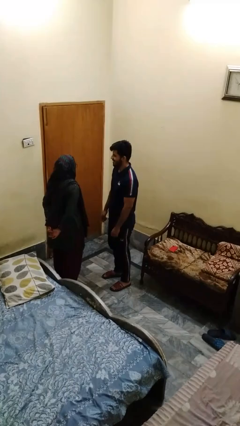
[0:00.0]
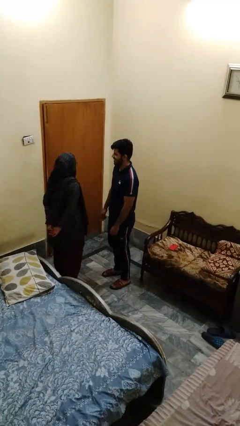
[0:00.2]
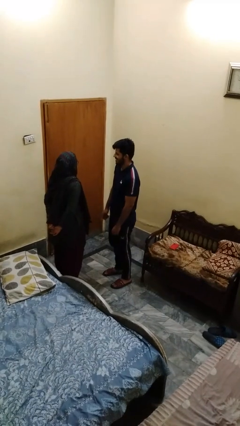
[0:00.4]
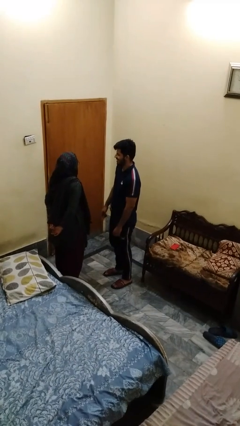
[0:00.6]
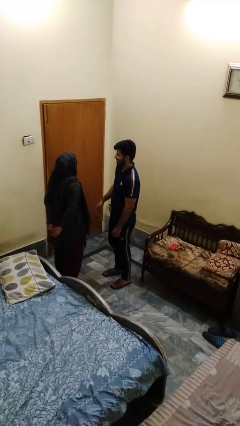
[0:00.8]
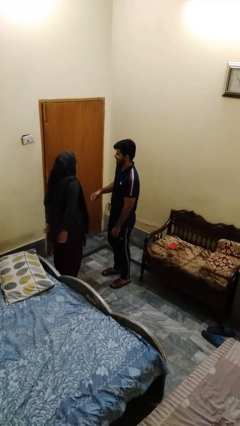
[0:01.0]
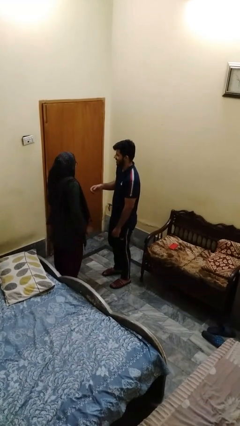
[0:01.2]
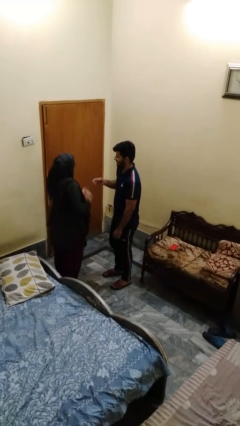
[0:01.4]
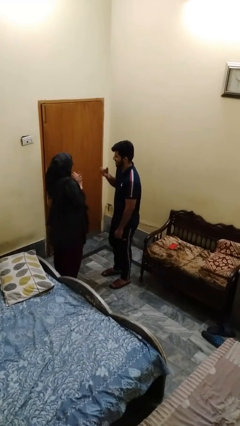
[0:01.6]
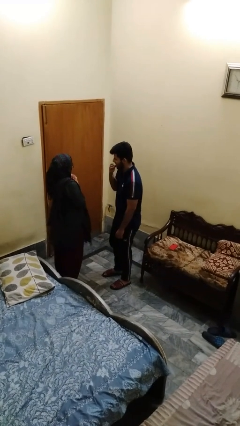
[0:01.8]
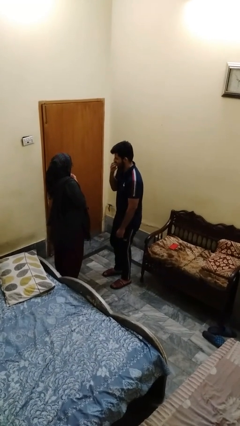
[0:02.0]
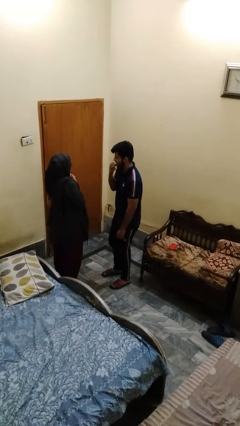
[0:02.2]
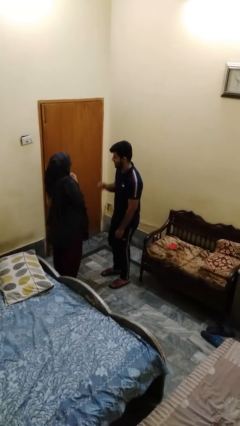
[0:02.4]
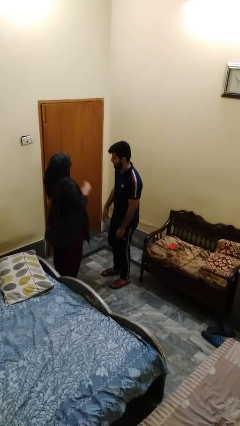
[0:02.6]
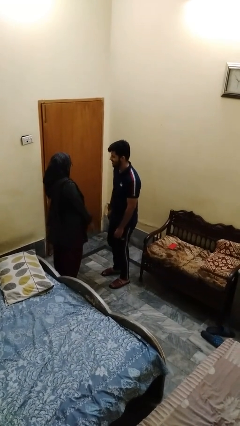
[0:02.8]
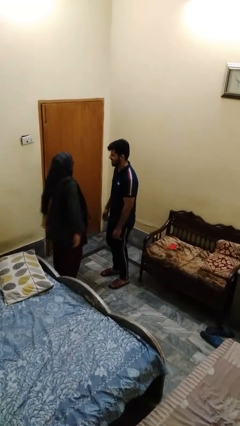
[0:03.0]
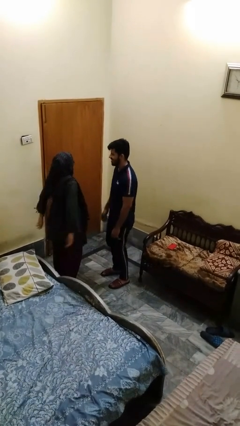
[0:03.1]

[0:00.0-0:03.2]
person laughs with person

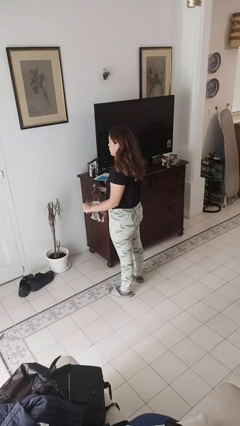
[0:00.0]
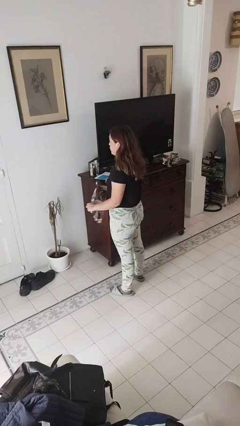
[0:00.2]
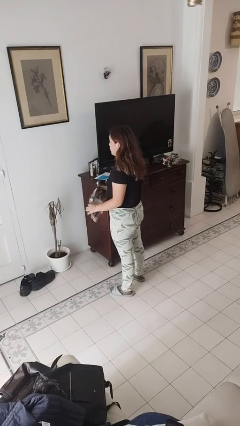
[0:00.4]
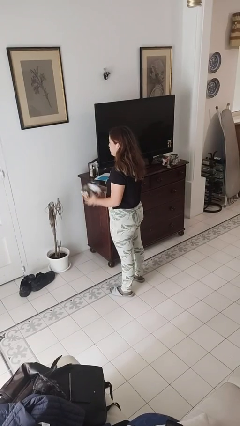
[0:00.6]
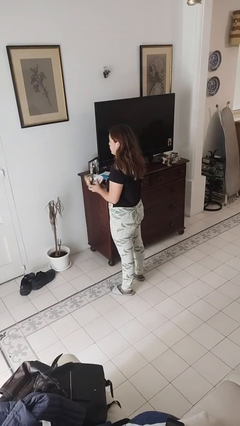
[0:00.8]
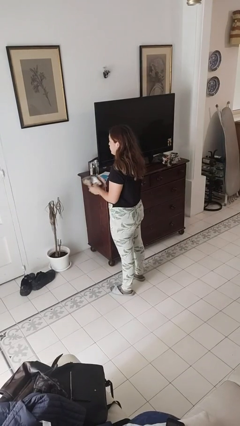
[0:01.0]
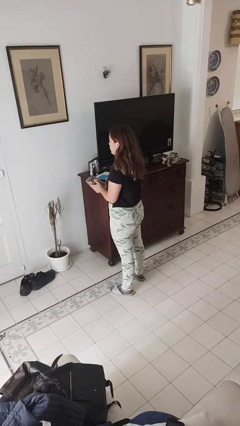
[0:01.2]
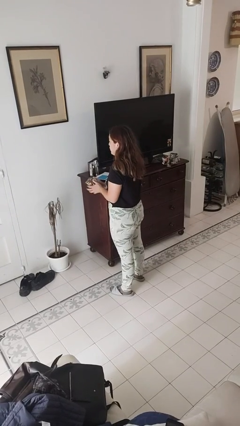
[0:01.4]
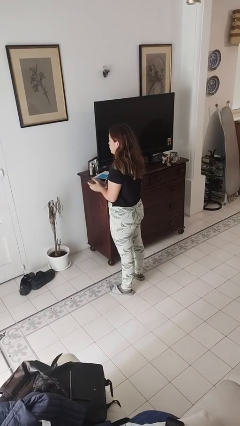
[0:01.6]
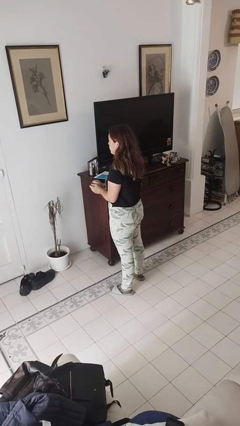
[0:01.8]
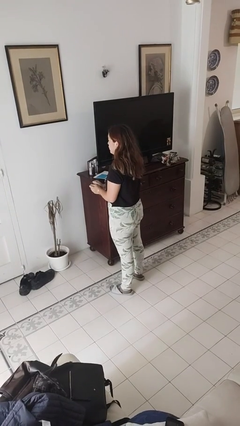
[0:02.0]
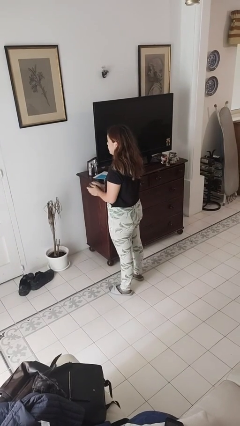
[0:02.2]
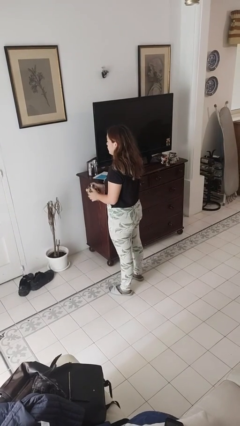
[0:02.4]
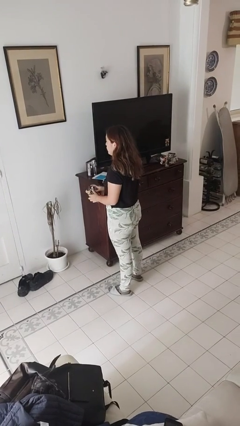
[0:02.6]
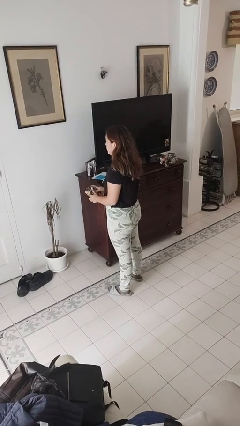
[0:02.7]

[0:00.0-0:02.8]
person crumples paper

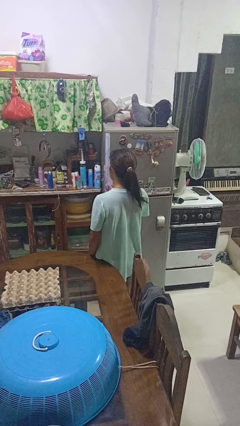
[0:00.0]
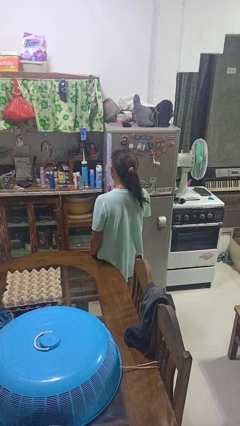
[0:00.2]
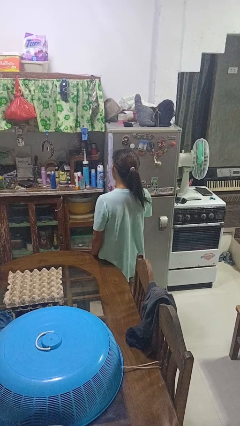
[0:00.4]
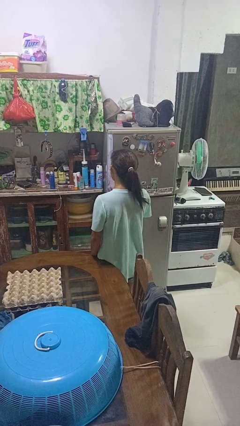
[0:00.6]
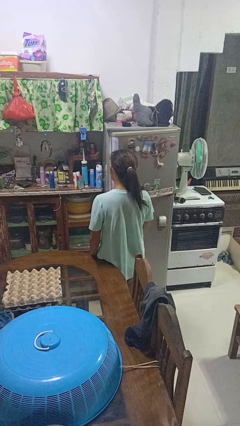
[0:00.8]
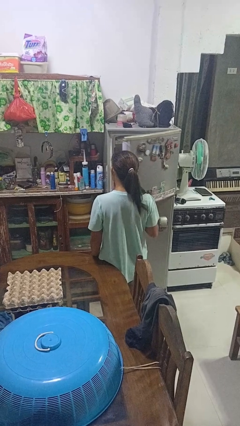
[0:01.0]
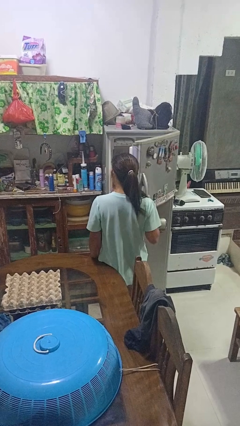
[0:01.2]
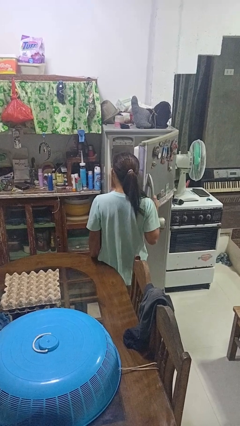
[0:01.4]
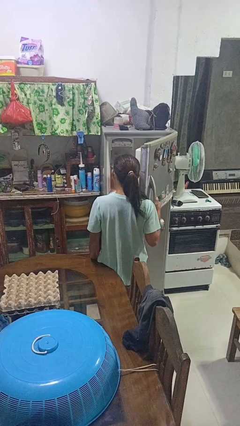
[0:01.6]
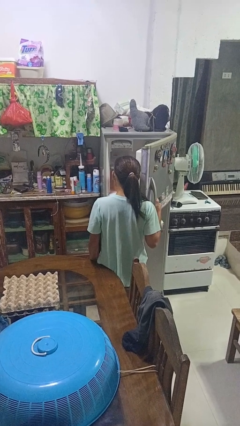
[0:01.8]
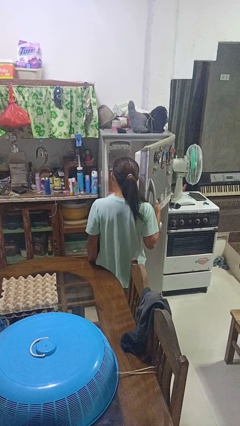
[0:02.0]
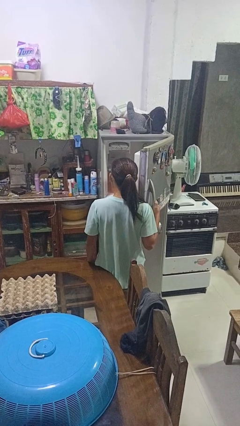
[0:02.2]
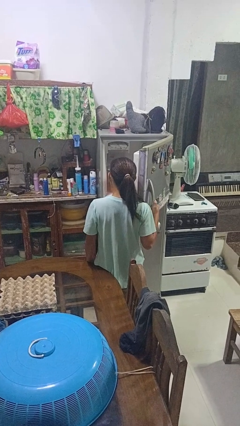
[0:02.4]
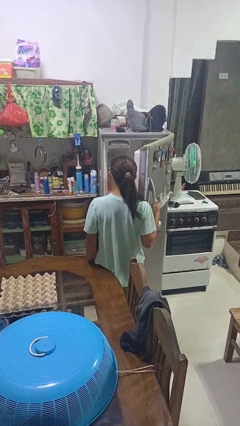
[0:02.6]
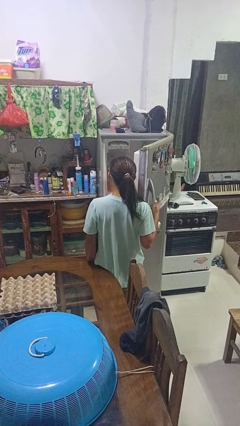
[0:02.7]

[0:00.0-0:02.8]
person opens refrigerator

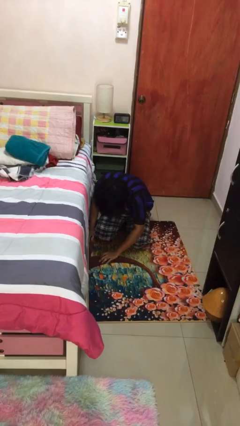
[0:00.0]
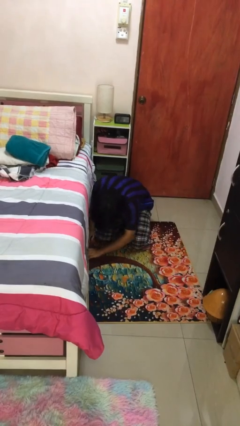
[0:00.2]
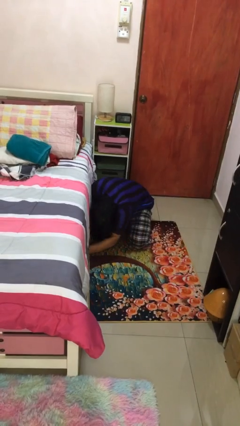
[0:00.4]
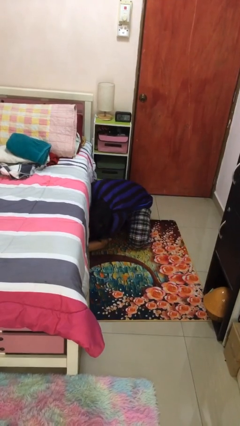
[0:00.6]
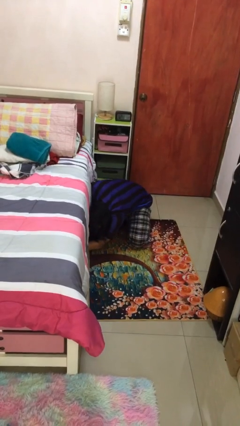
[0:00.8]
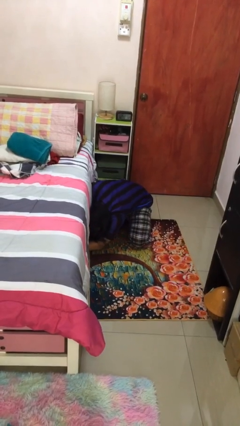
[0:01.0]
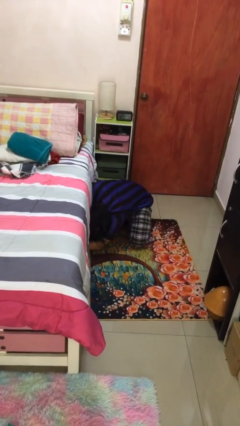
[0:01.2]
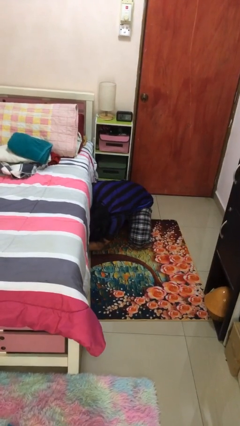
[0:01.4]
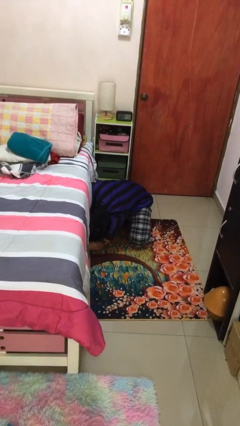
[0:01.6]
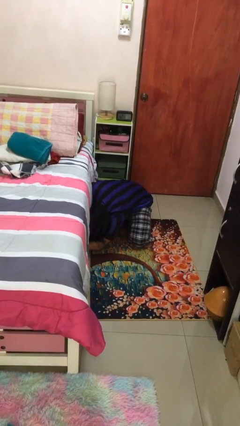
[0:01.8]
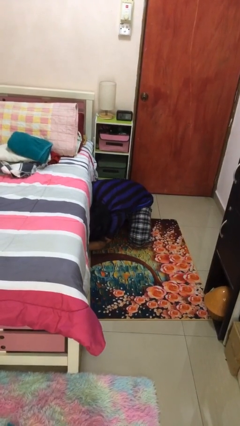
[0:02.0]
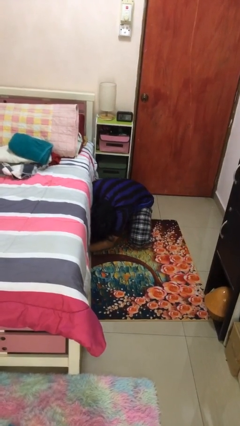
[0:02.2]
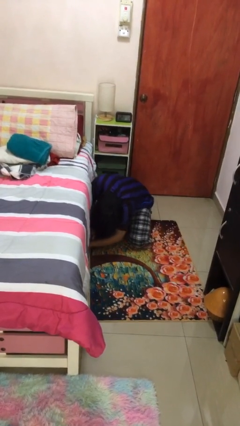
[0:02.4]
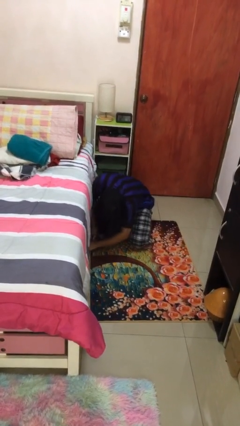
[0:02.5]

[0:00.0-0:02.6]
person searches under bed

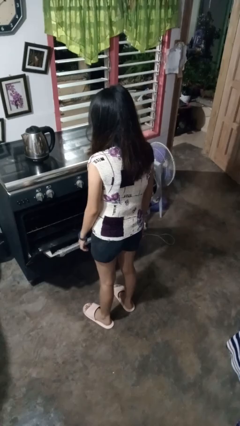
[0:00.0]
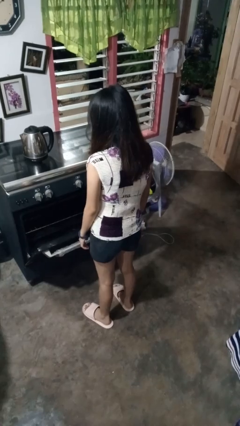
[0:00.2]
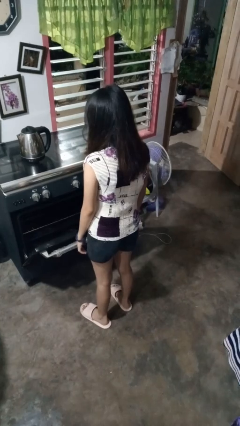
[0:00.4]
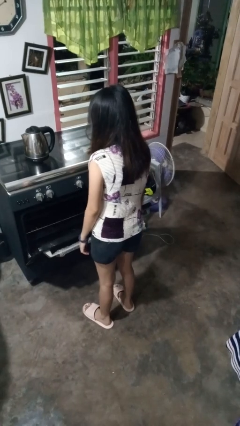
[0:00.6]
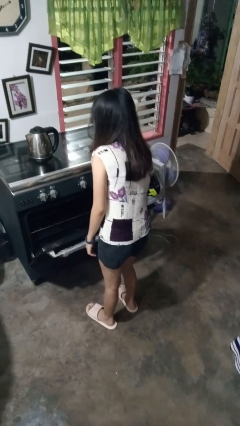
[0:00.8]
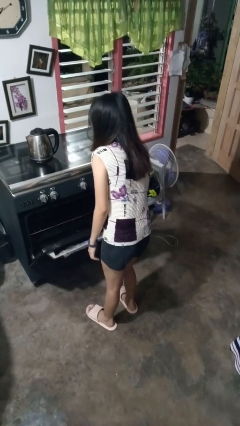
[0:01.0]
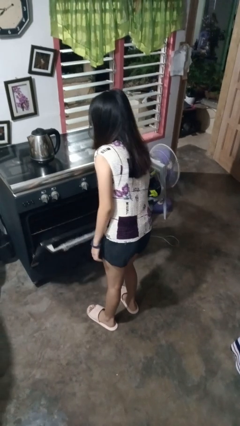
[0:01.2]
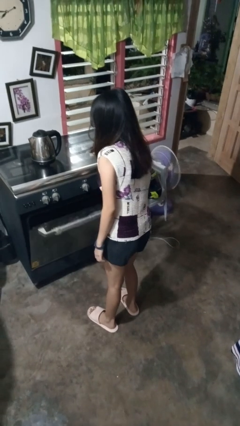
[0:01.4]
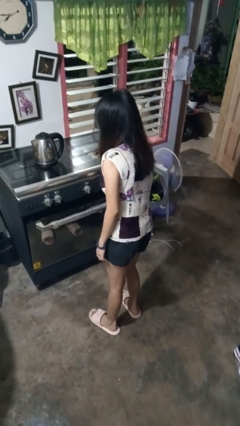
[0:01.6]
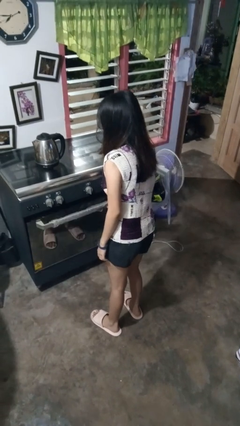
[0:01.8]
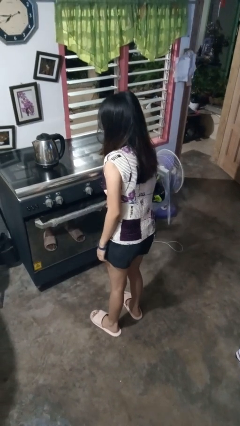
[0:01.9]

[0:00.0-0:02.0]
person closes oven door

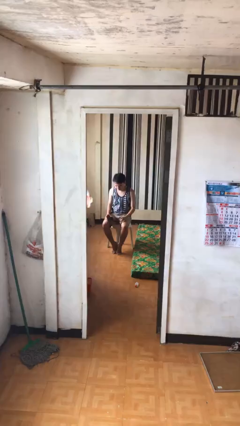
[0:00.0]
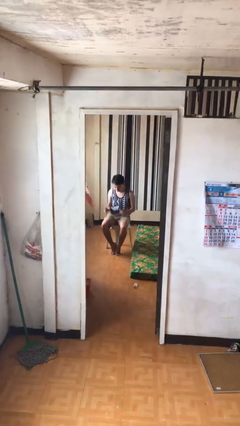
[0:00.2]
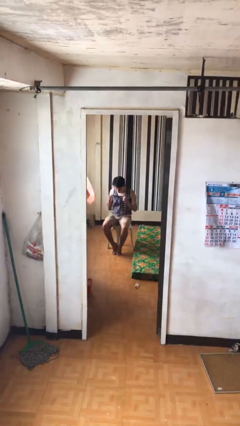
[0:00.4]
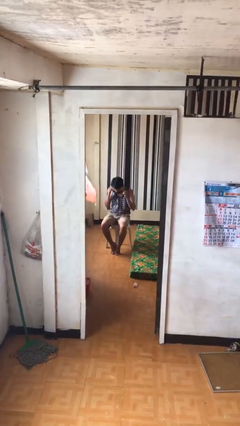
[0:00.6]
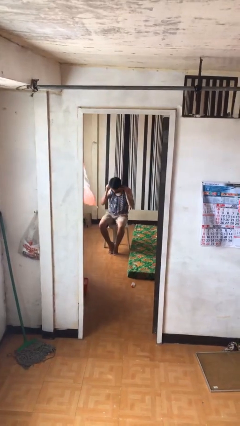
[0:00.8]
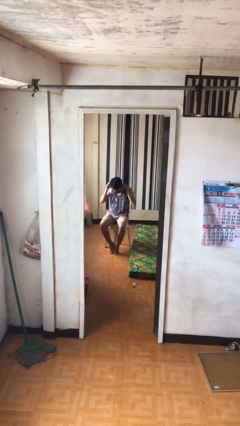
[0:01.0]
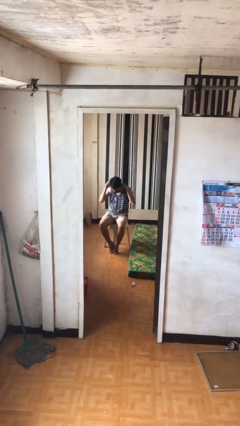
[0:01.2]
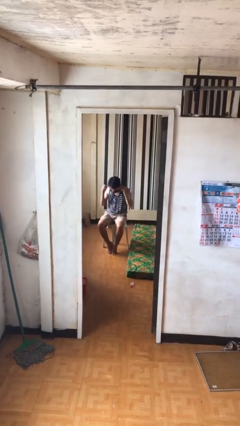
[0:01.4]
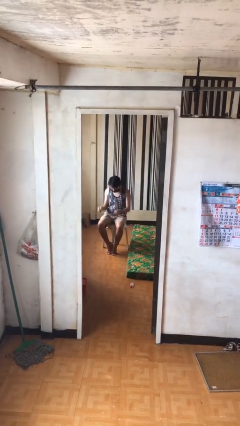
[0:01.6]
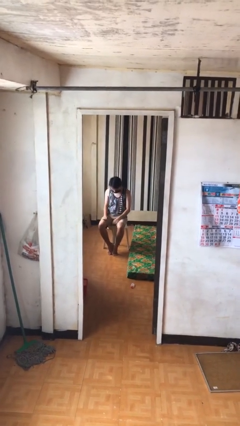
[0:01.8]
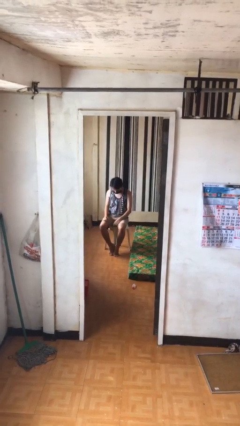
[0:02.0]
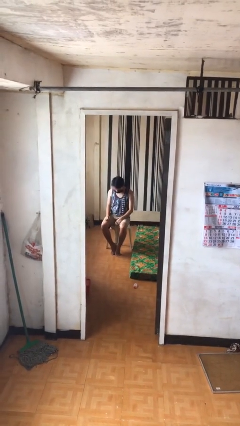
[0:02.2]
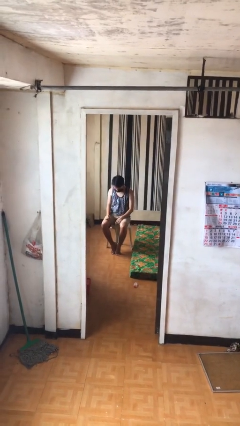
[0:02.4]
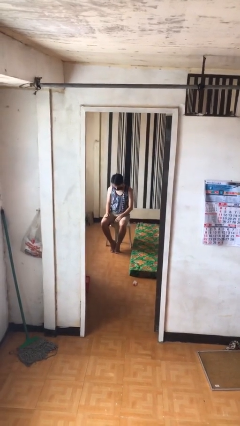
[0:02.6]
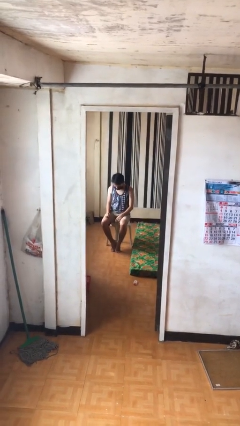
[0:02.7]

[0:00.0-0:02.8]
person puts on facemask

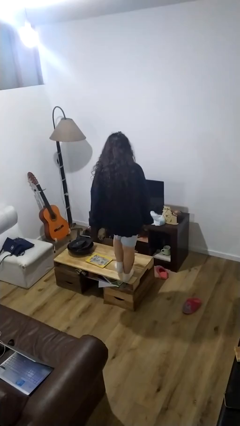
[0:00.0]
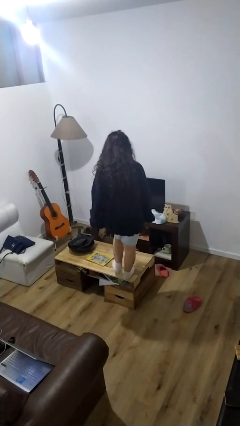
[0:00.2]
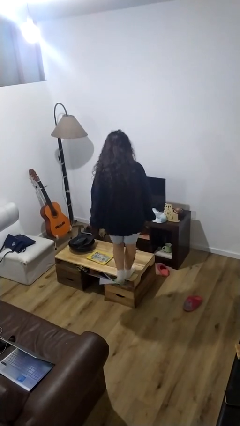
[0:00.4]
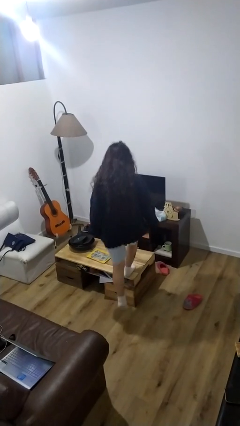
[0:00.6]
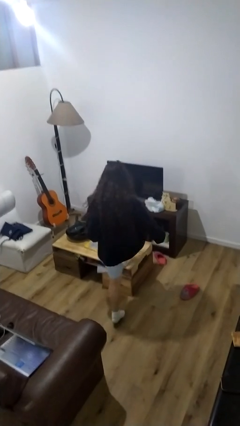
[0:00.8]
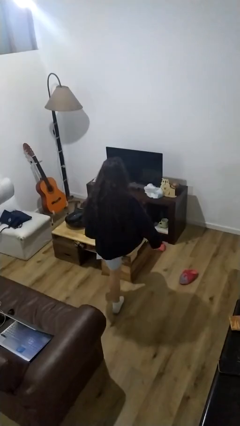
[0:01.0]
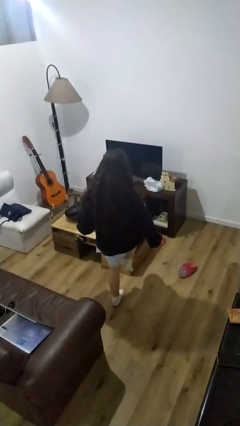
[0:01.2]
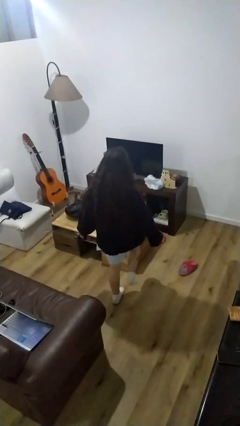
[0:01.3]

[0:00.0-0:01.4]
person climbs off table
